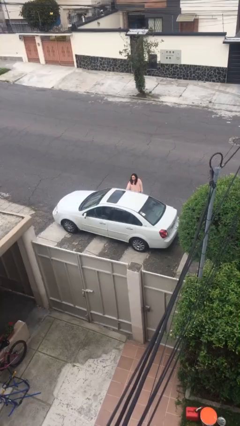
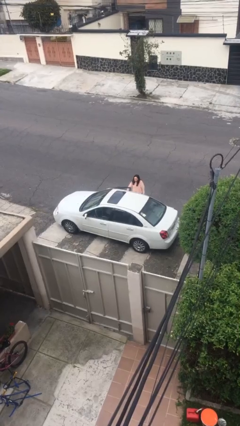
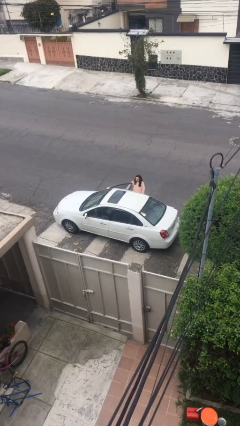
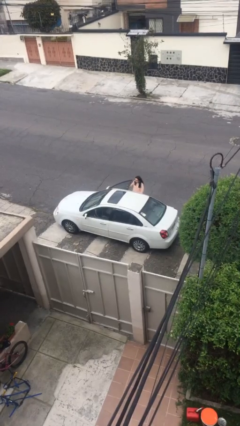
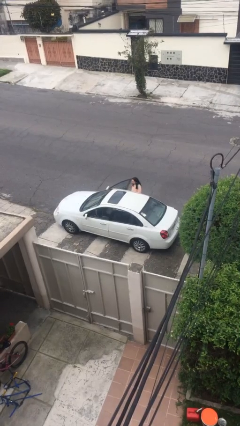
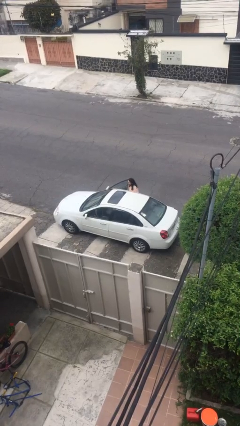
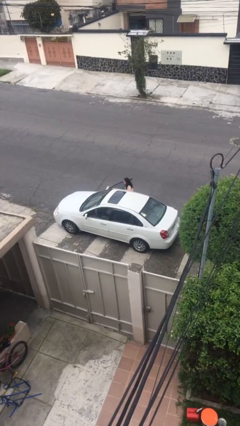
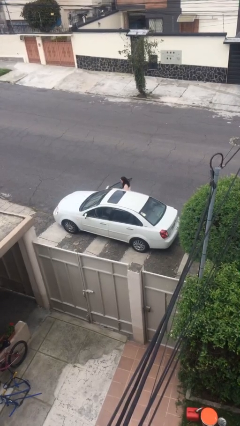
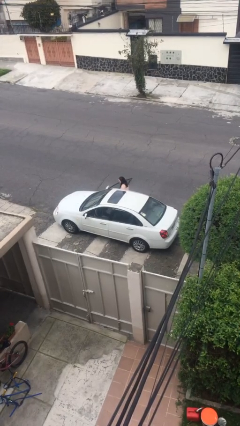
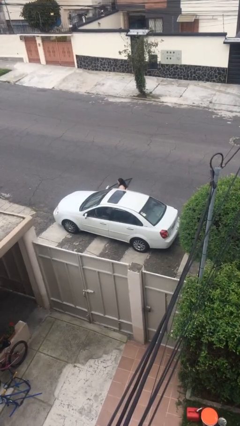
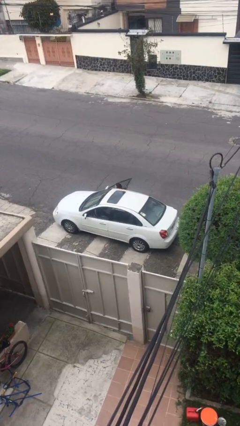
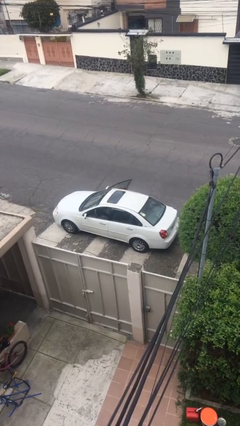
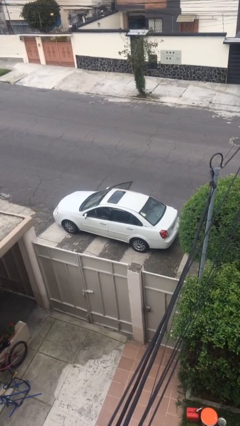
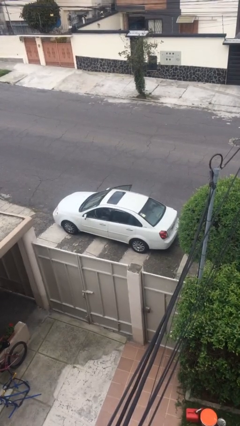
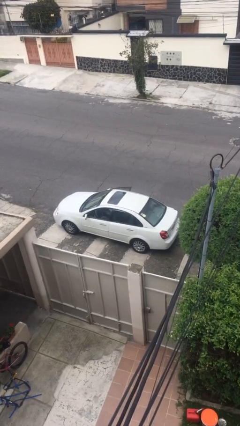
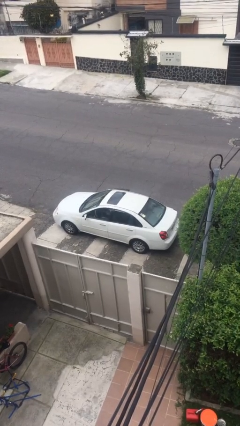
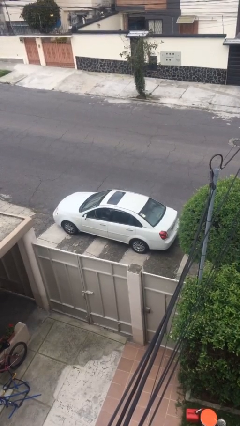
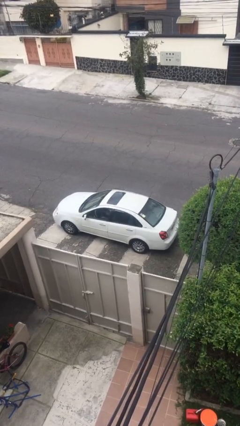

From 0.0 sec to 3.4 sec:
car picks up person

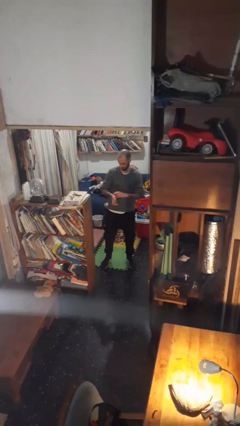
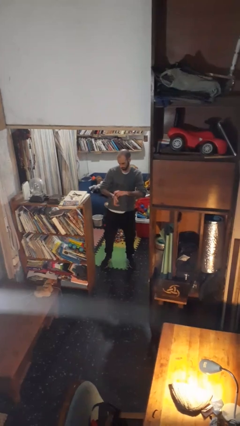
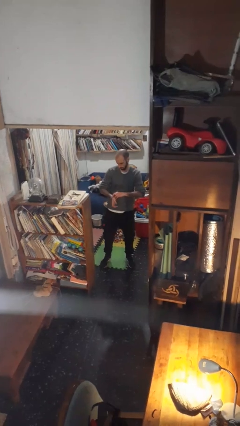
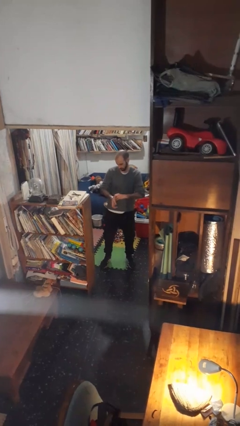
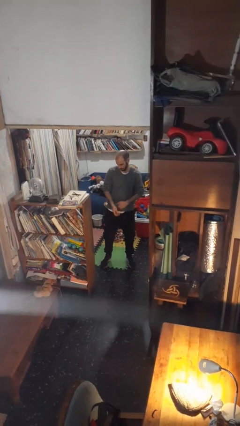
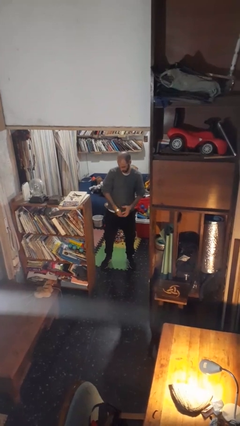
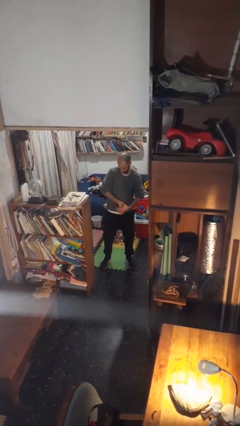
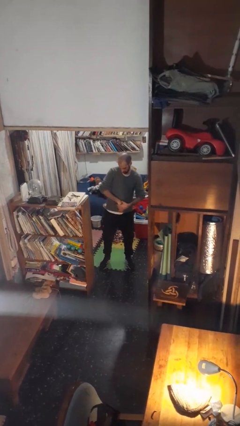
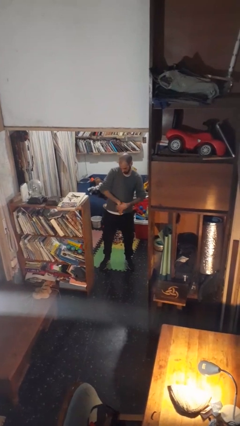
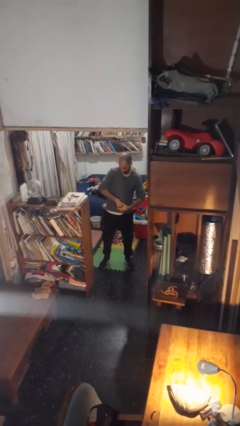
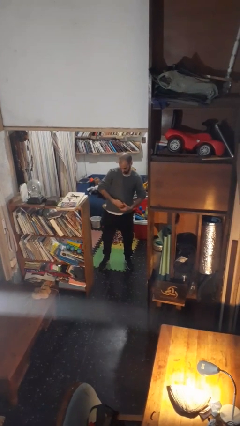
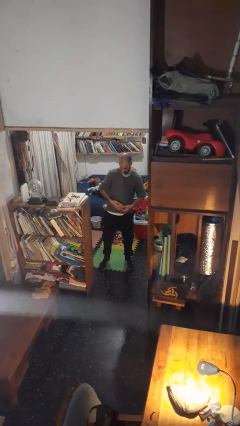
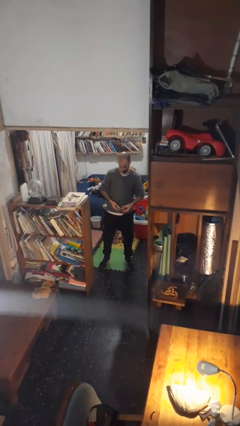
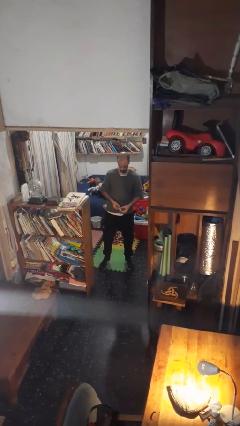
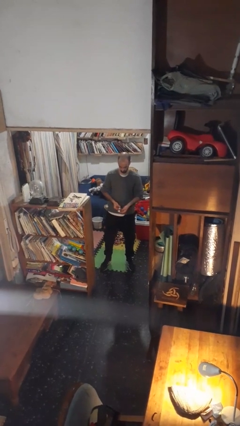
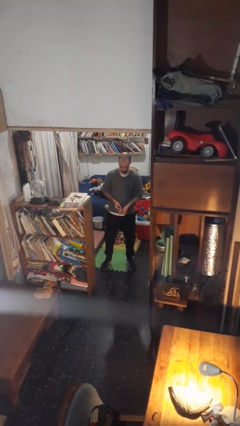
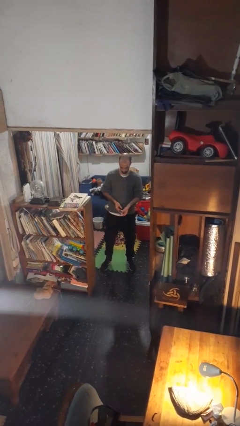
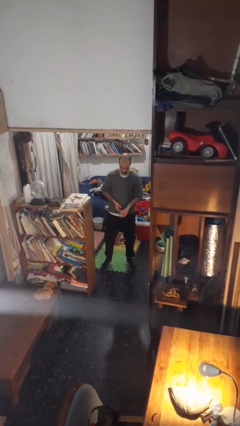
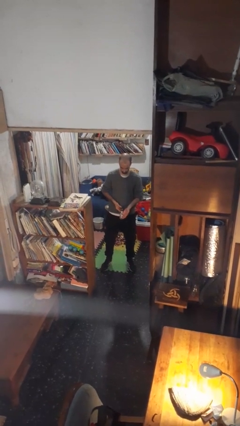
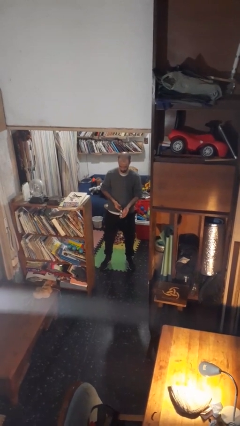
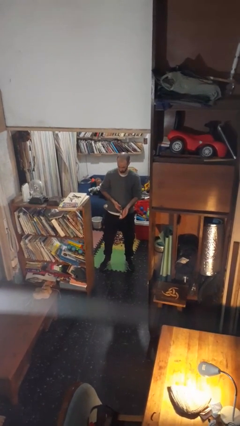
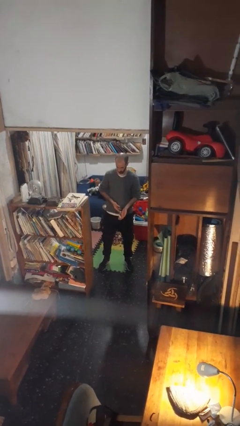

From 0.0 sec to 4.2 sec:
person takes off wristwatch

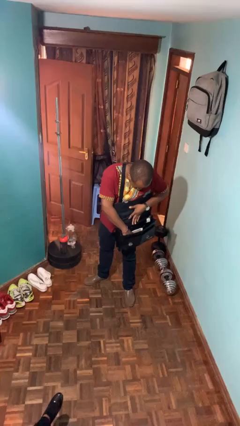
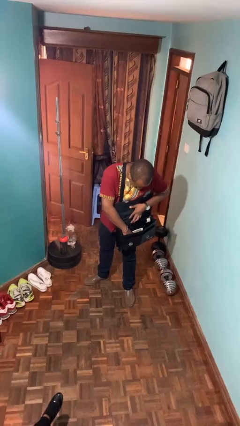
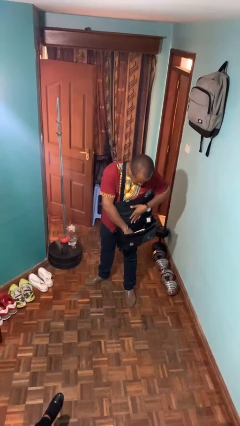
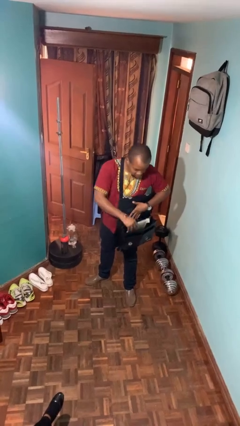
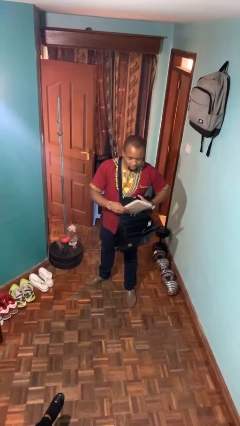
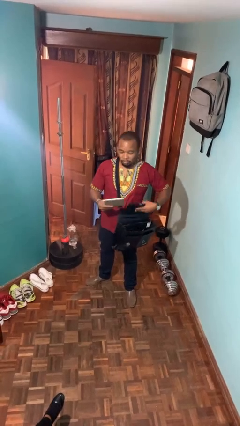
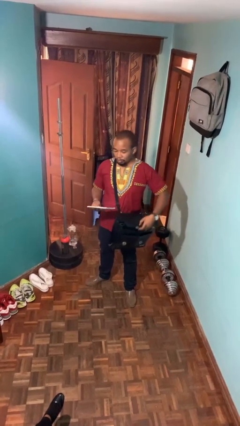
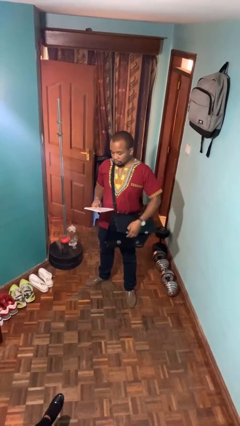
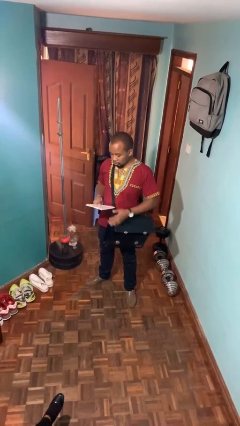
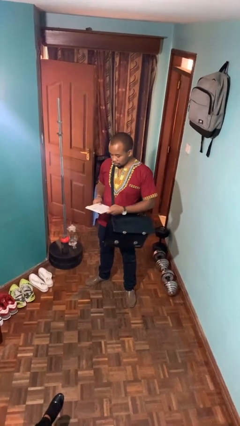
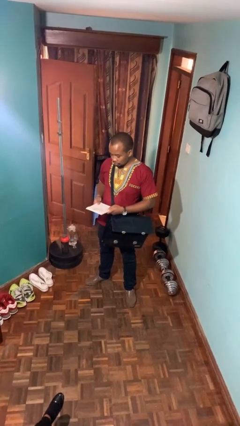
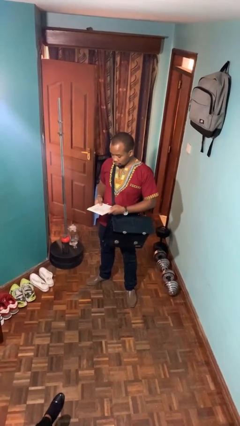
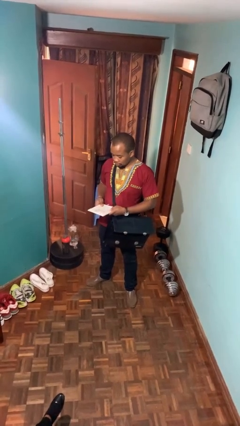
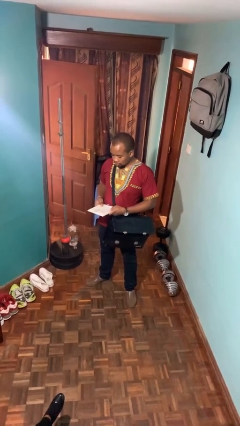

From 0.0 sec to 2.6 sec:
person takes object from purse

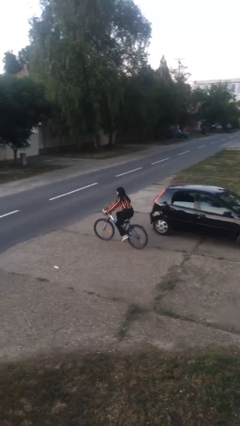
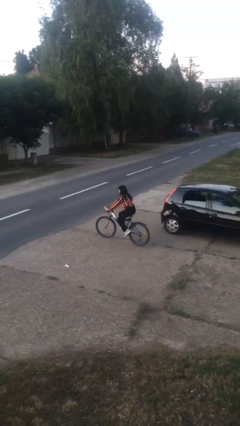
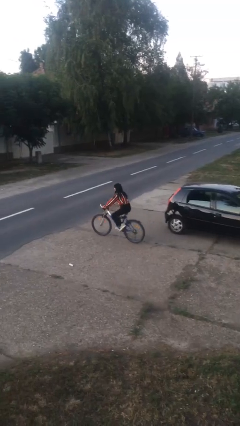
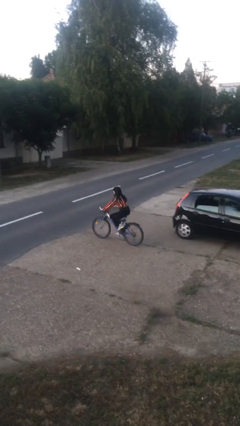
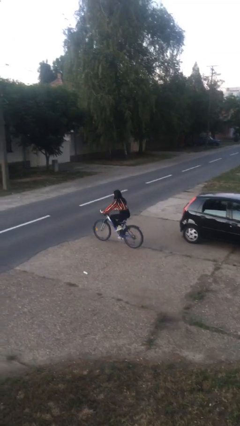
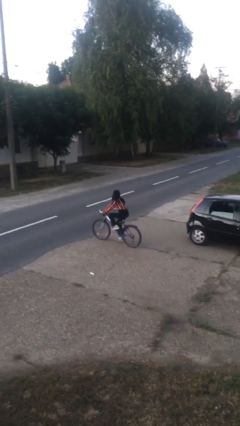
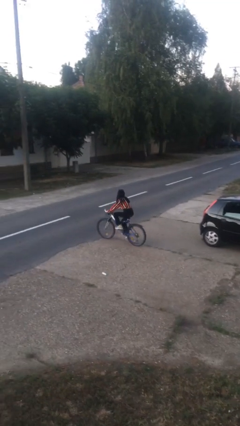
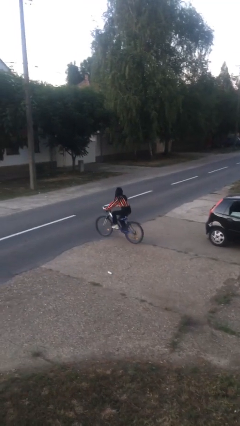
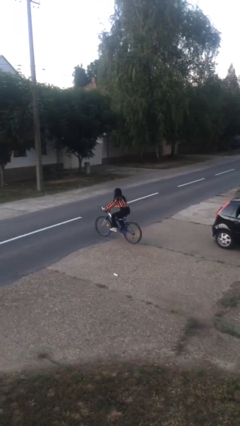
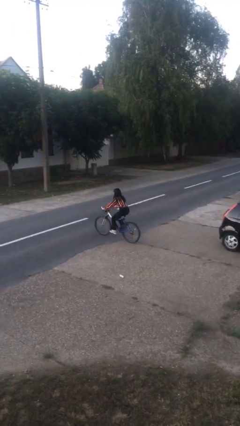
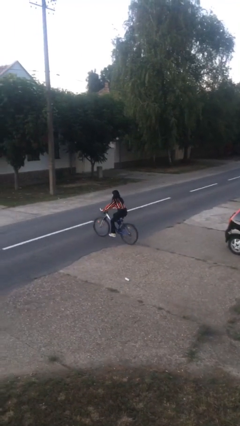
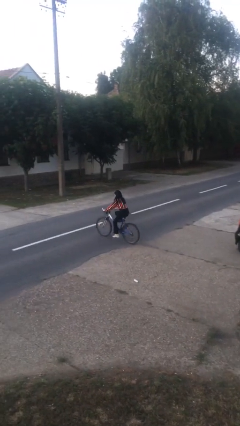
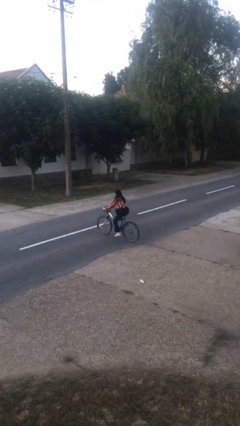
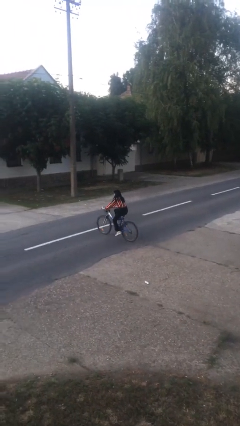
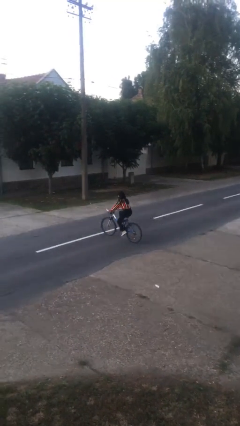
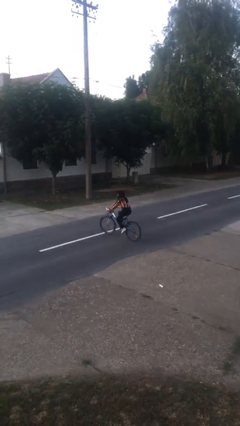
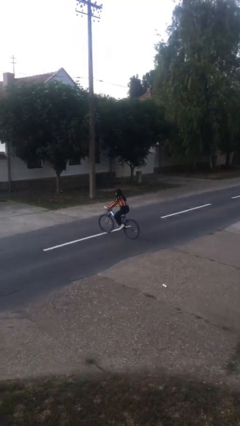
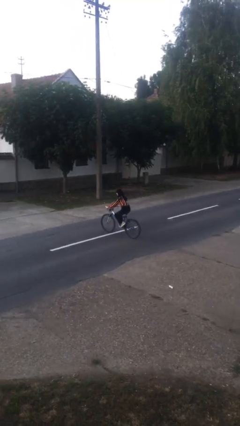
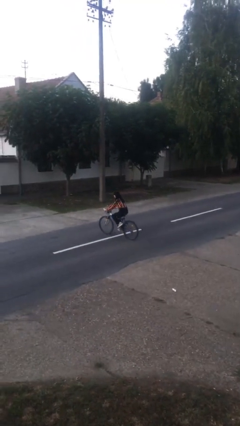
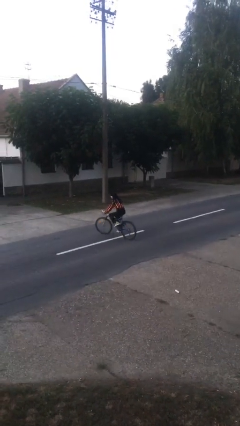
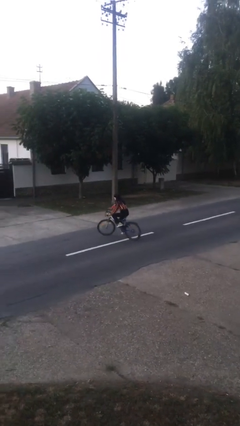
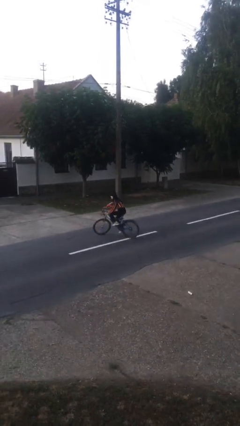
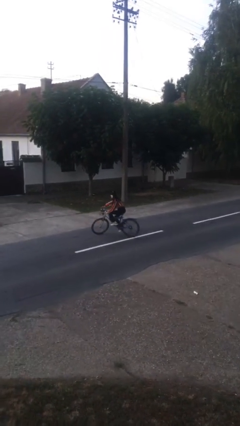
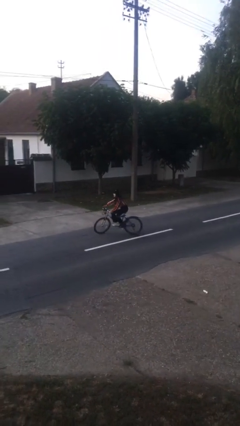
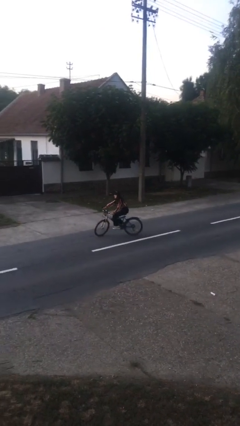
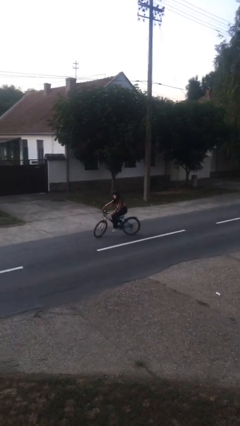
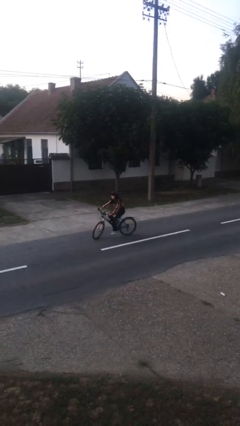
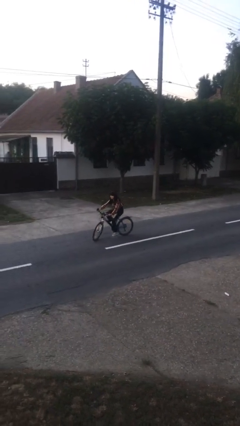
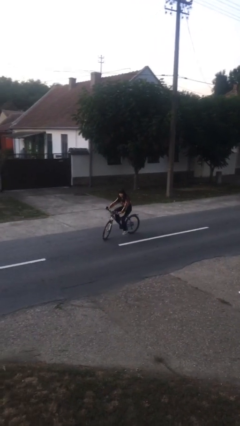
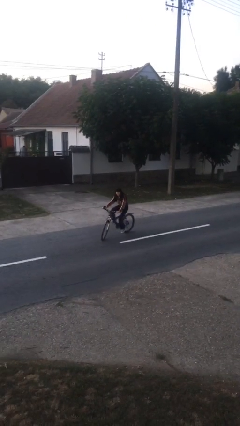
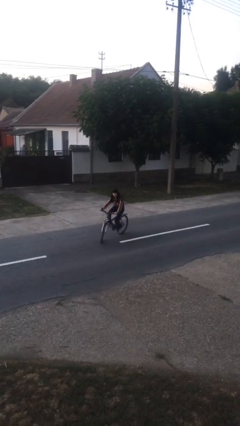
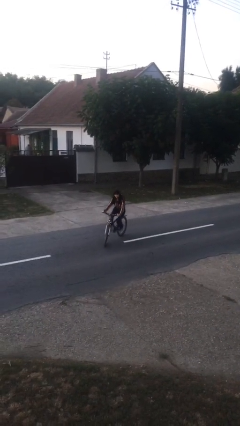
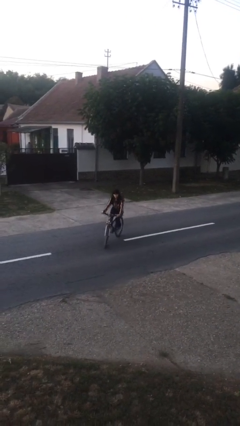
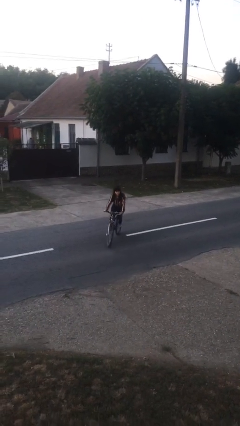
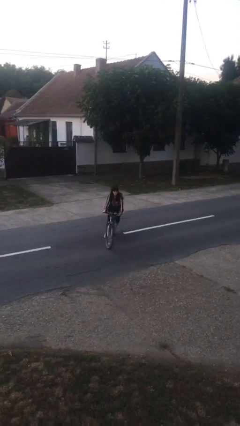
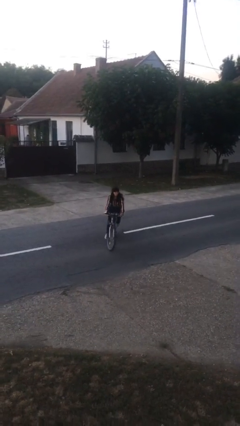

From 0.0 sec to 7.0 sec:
person rides bicycle

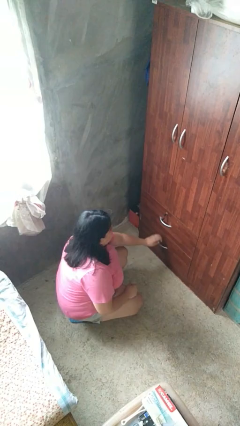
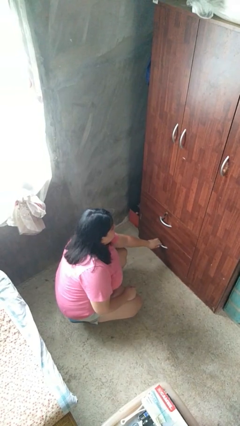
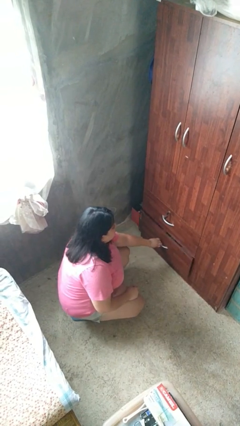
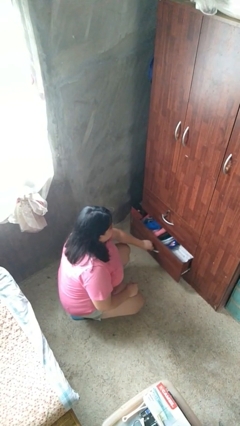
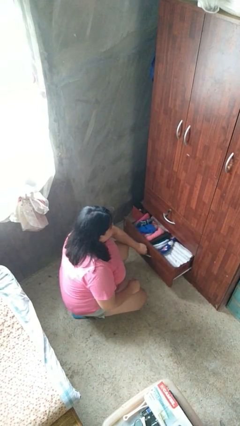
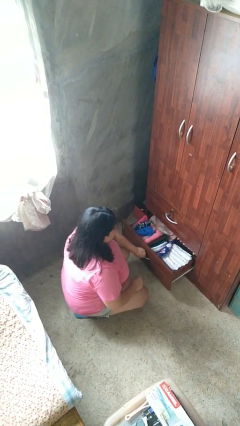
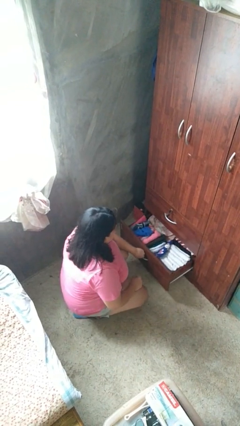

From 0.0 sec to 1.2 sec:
person opens dresser drawer
